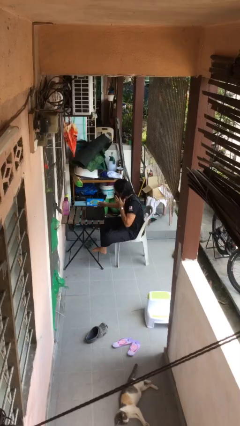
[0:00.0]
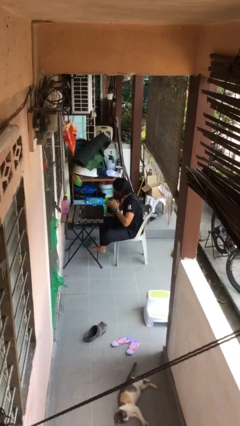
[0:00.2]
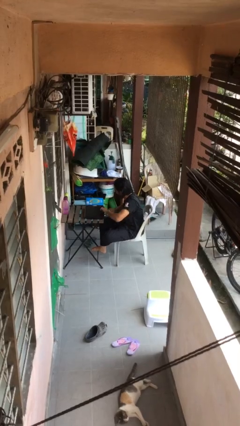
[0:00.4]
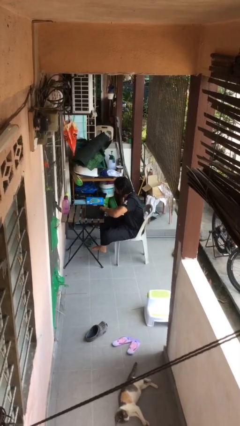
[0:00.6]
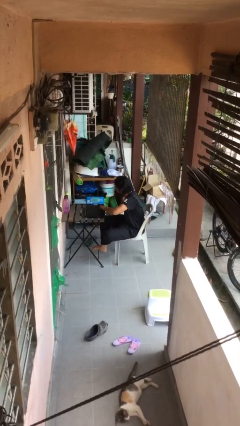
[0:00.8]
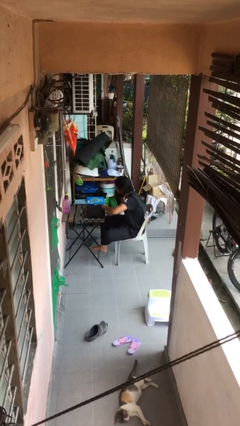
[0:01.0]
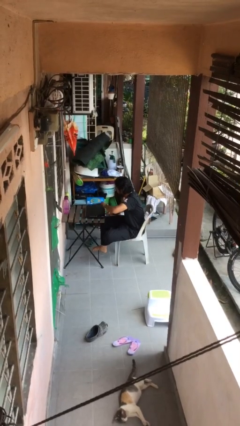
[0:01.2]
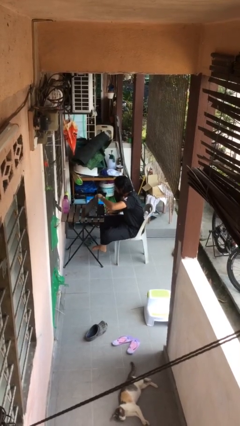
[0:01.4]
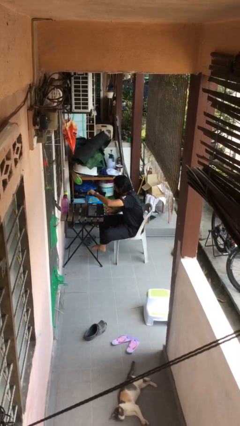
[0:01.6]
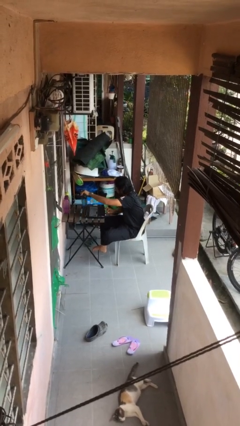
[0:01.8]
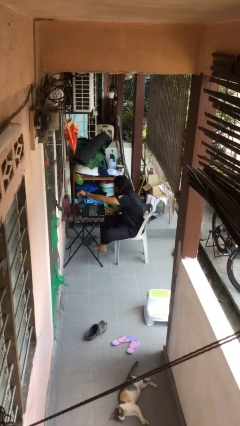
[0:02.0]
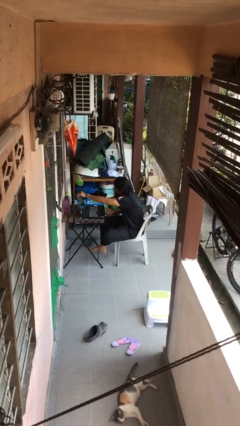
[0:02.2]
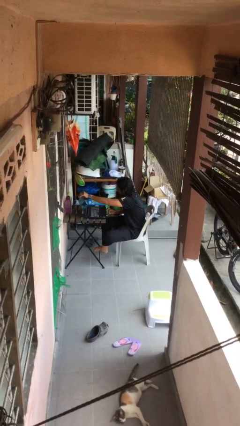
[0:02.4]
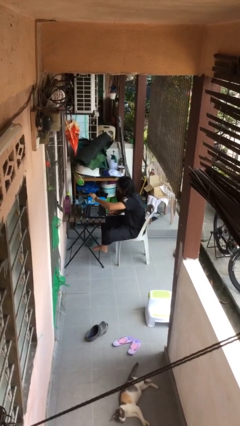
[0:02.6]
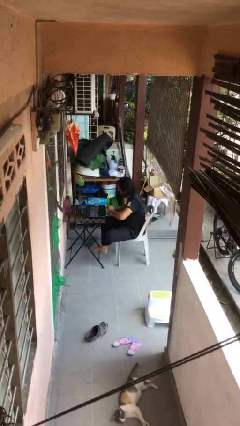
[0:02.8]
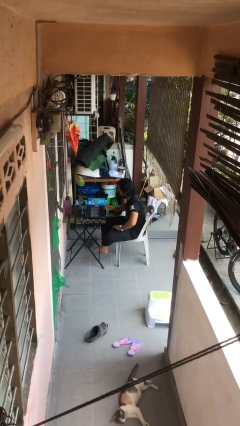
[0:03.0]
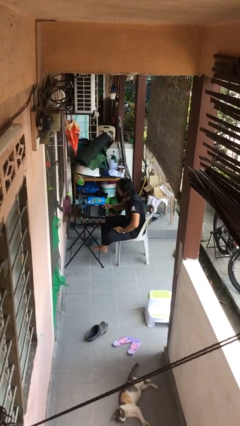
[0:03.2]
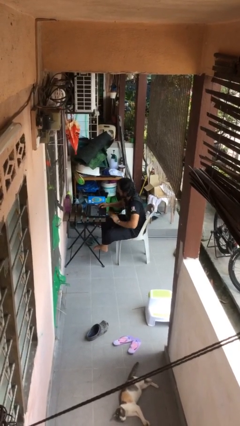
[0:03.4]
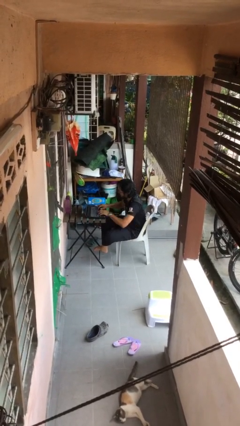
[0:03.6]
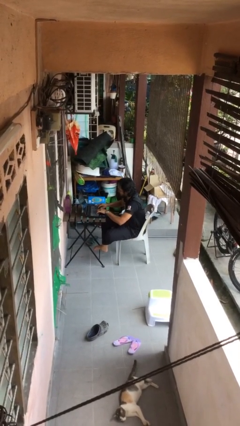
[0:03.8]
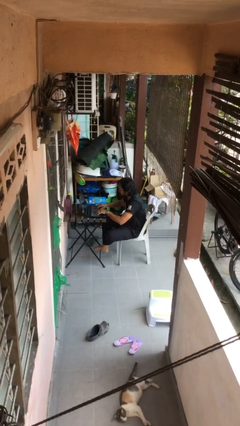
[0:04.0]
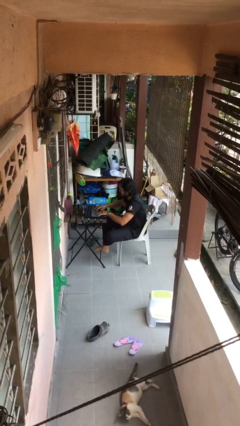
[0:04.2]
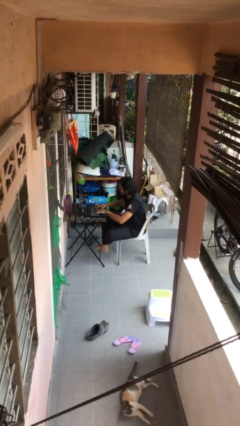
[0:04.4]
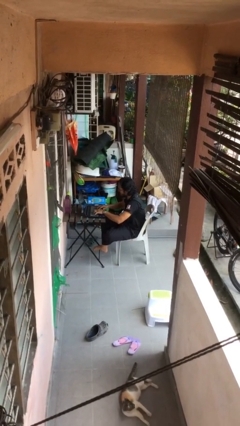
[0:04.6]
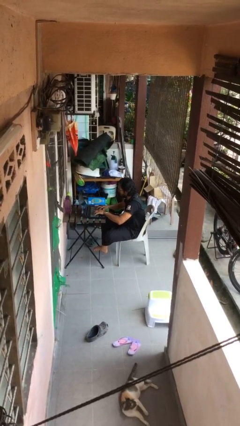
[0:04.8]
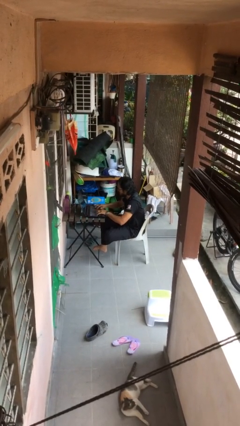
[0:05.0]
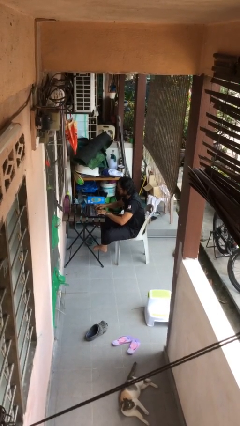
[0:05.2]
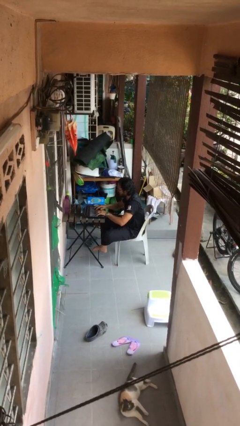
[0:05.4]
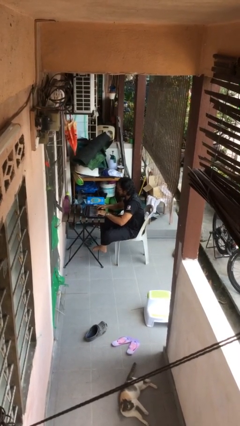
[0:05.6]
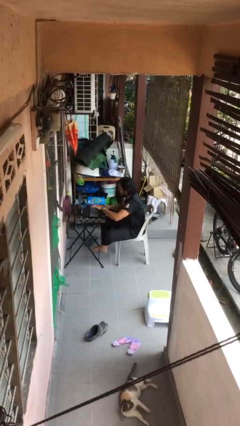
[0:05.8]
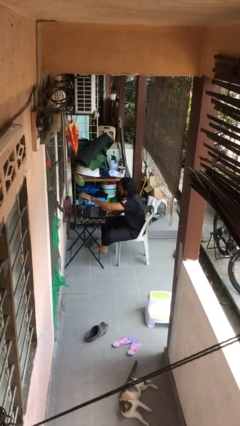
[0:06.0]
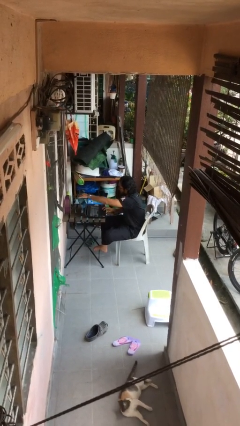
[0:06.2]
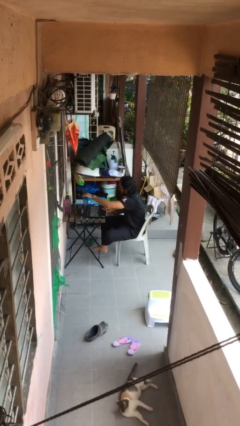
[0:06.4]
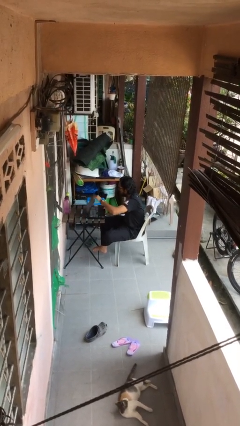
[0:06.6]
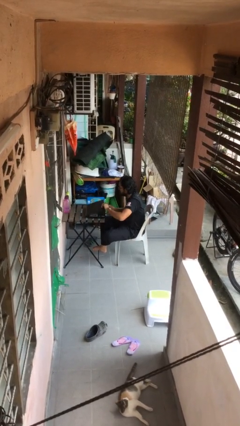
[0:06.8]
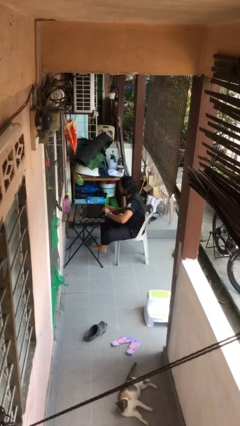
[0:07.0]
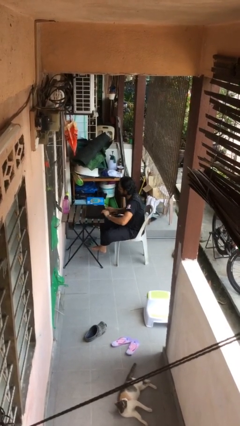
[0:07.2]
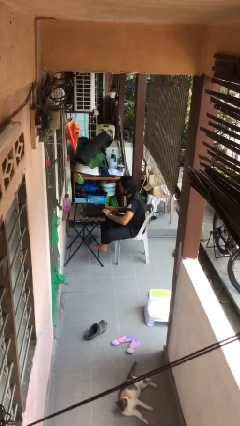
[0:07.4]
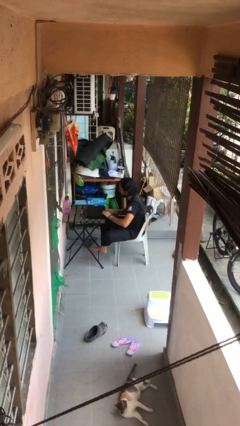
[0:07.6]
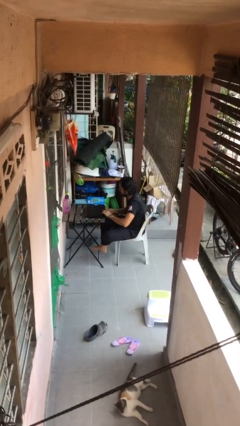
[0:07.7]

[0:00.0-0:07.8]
person interacts with laptop

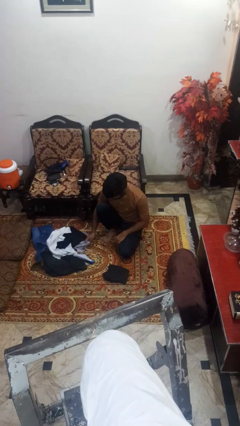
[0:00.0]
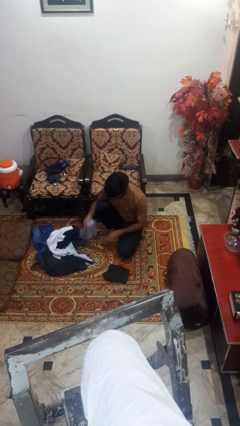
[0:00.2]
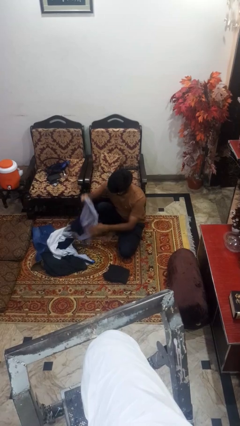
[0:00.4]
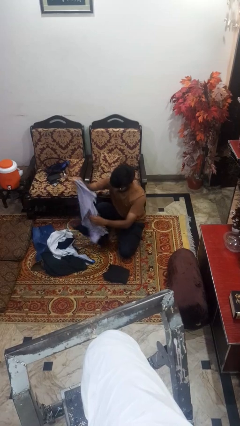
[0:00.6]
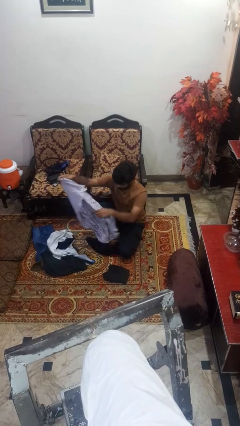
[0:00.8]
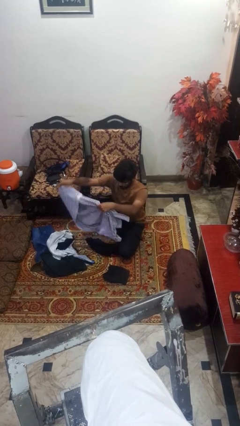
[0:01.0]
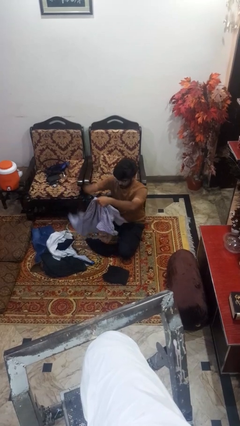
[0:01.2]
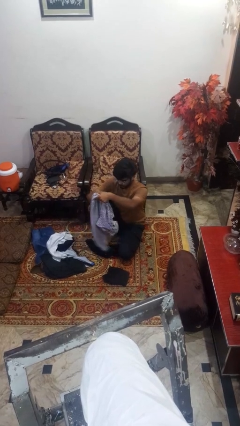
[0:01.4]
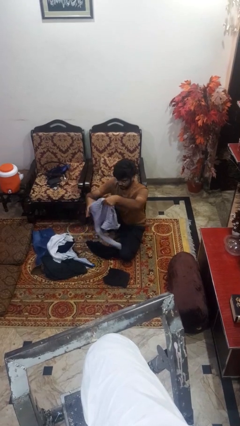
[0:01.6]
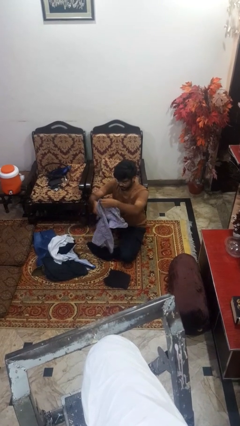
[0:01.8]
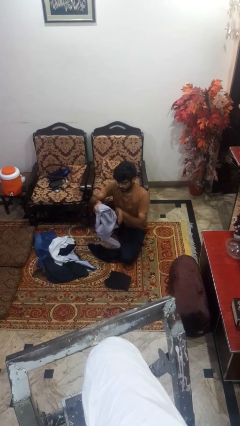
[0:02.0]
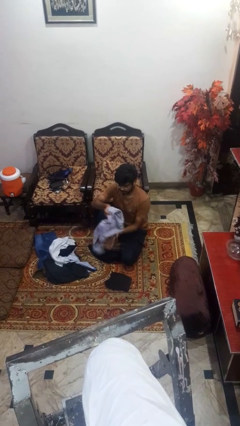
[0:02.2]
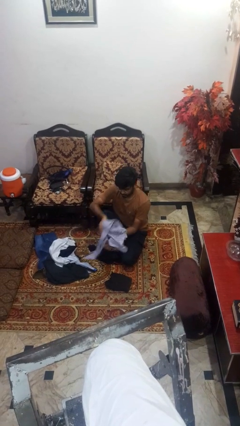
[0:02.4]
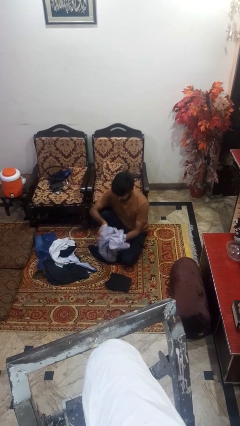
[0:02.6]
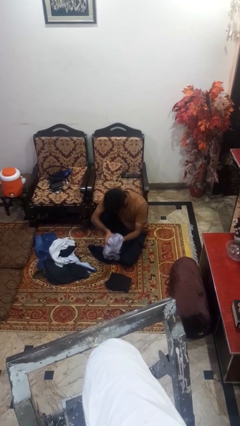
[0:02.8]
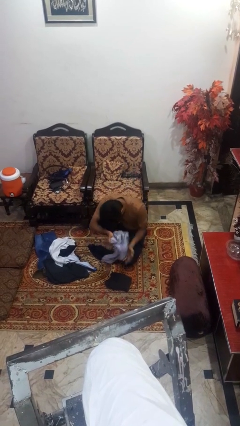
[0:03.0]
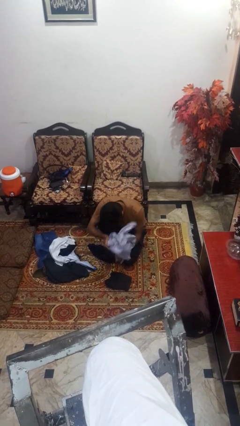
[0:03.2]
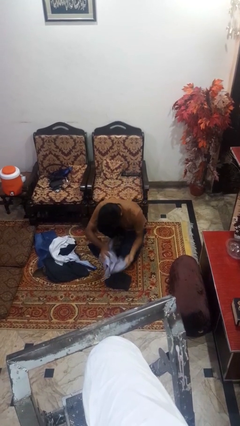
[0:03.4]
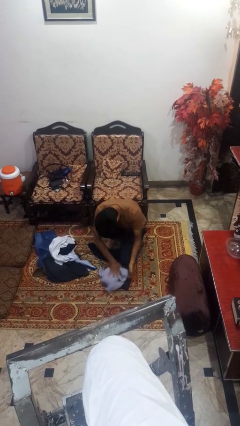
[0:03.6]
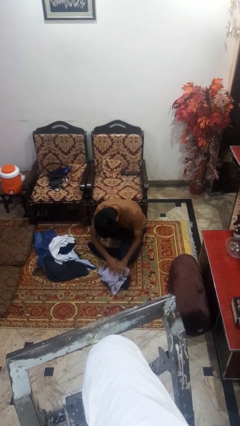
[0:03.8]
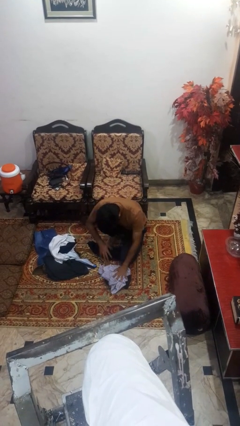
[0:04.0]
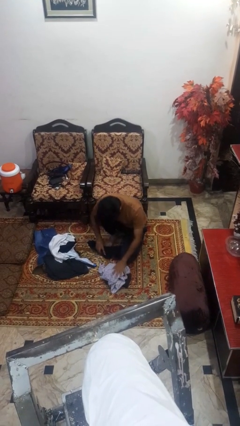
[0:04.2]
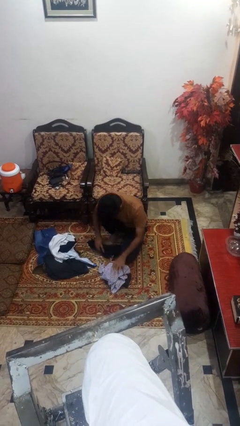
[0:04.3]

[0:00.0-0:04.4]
person folds shirt

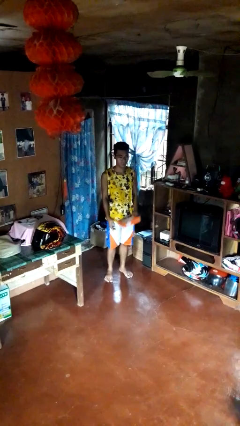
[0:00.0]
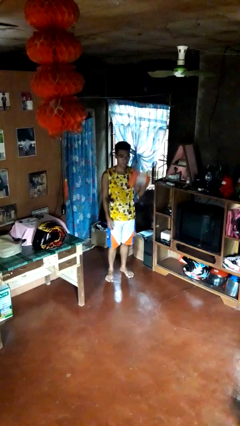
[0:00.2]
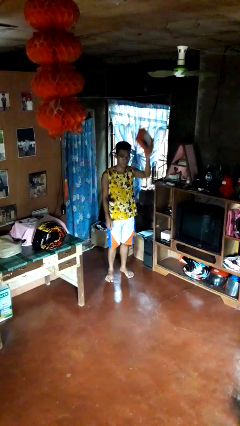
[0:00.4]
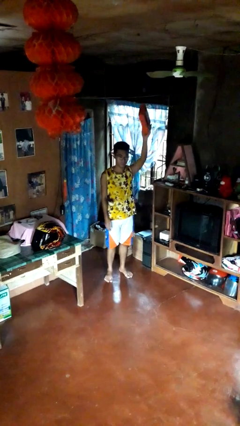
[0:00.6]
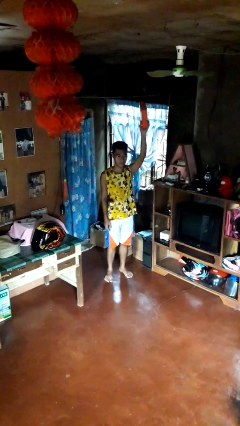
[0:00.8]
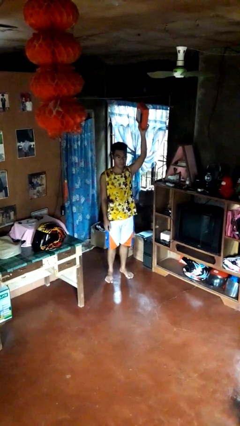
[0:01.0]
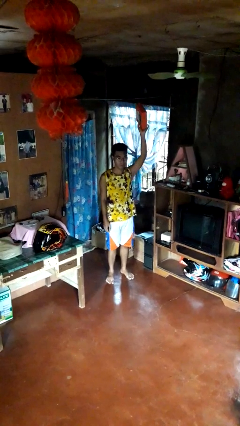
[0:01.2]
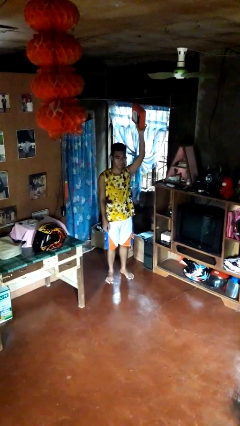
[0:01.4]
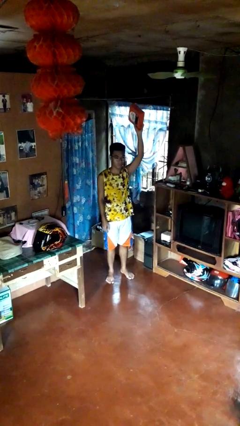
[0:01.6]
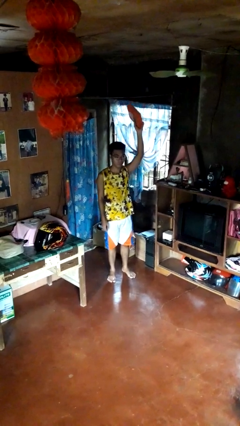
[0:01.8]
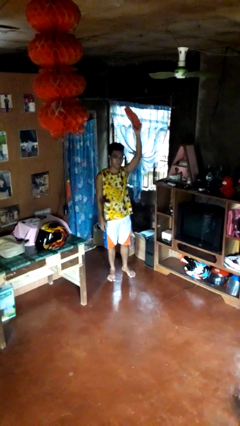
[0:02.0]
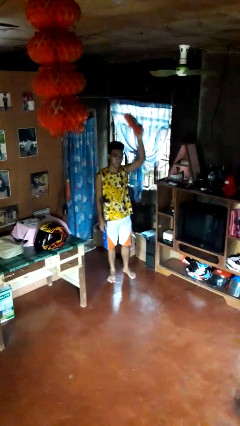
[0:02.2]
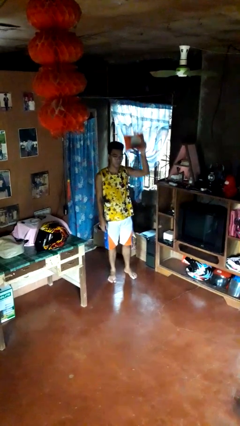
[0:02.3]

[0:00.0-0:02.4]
person holds object above head

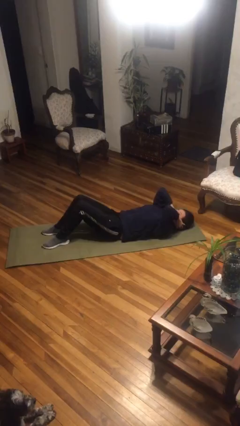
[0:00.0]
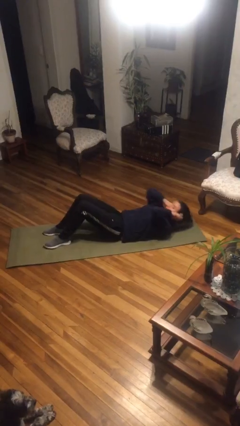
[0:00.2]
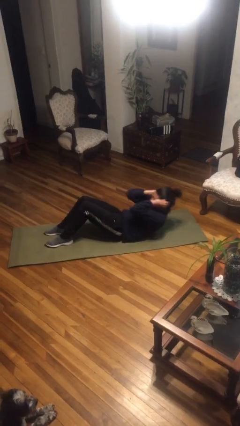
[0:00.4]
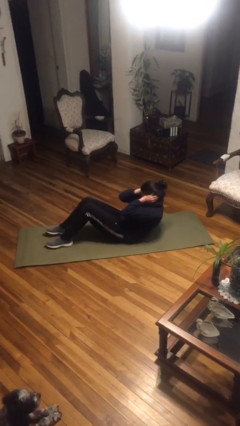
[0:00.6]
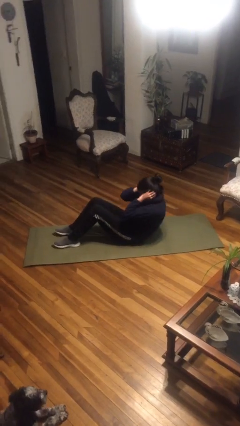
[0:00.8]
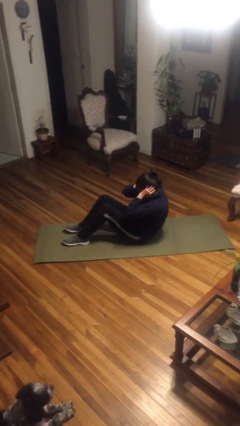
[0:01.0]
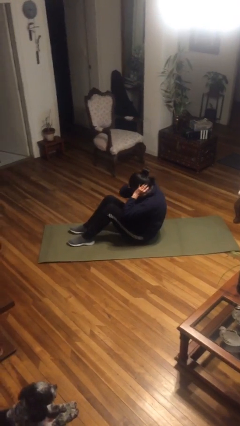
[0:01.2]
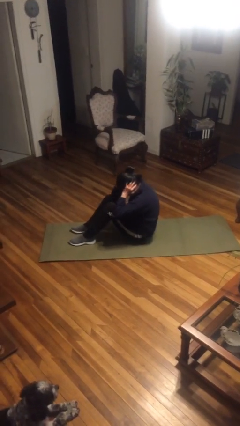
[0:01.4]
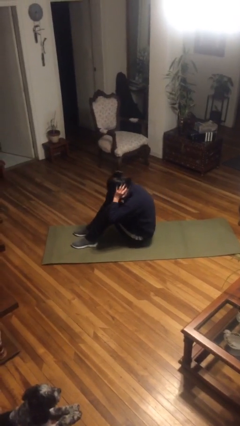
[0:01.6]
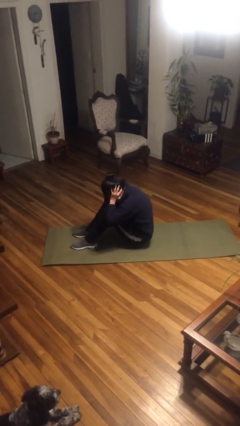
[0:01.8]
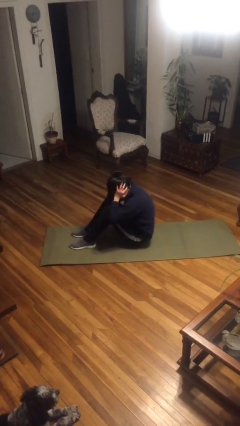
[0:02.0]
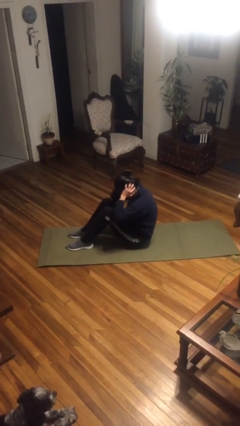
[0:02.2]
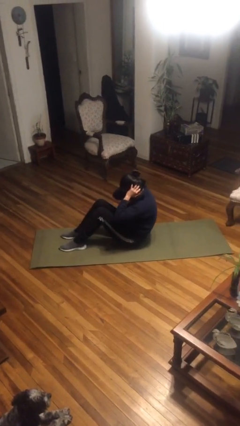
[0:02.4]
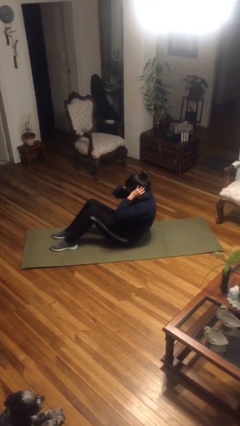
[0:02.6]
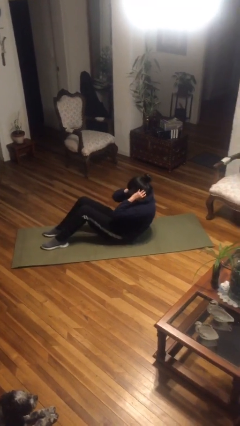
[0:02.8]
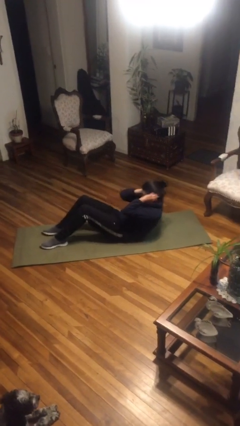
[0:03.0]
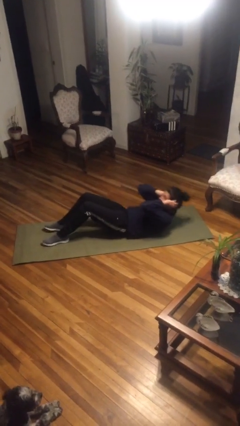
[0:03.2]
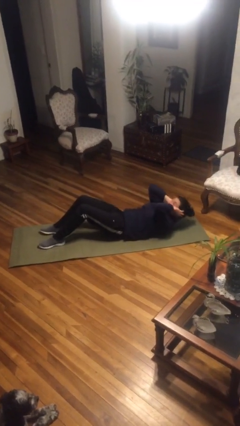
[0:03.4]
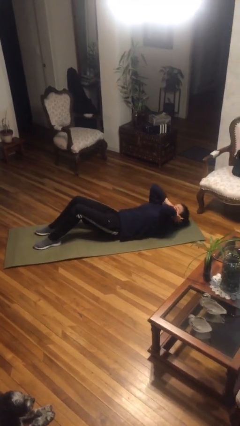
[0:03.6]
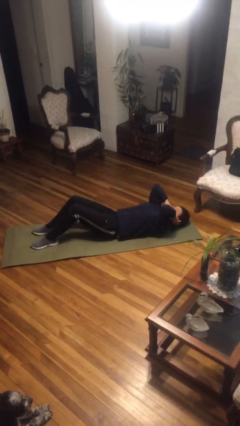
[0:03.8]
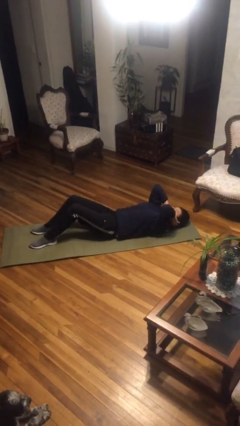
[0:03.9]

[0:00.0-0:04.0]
person exercises with situp
